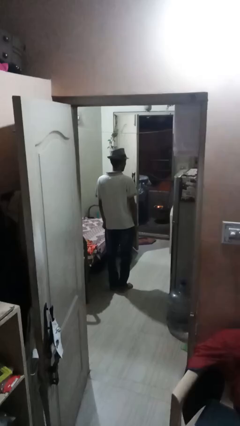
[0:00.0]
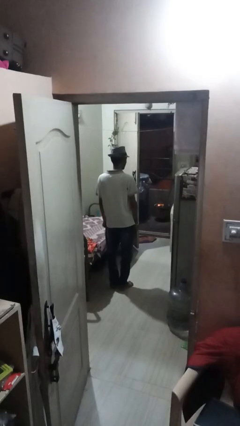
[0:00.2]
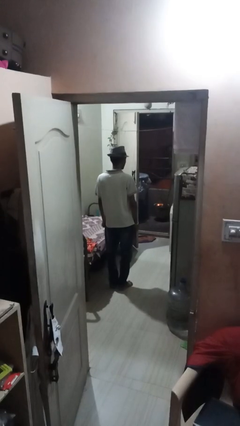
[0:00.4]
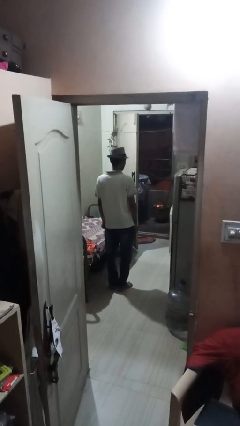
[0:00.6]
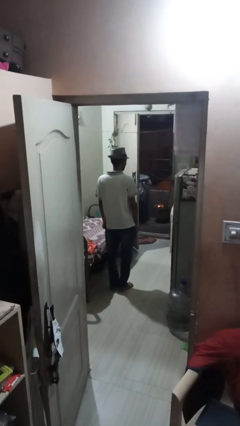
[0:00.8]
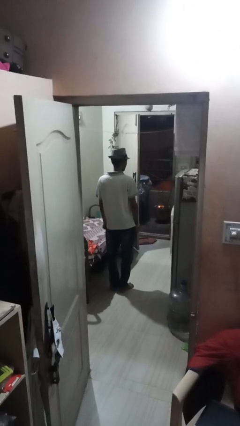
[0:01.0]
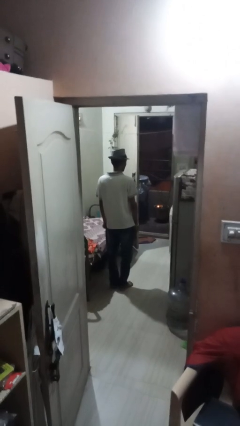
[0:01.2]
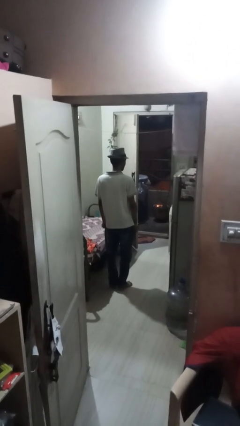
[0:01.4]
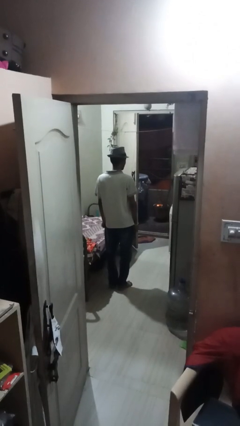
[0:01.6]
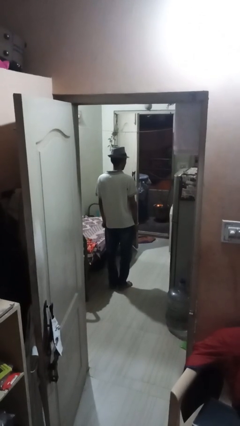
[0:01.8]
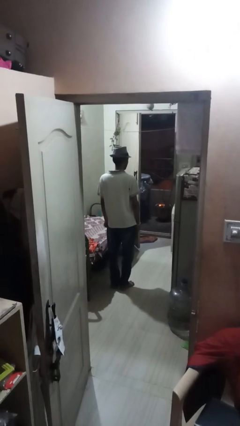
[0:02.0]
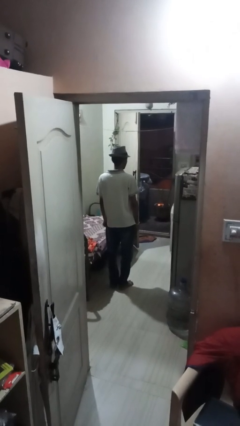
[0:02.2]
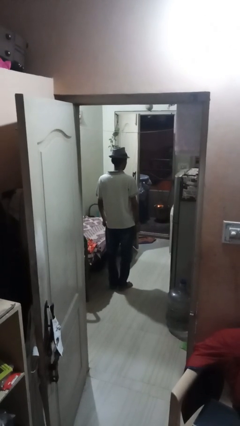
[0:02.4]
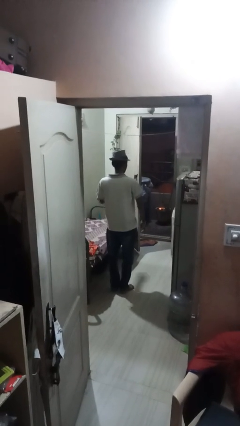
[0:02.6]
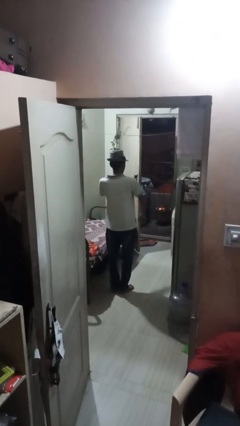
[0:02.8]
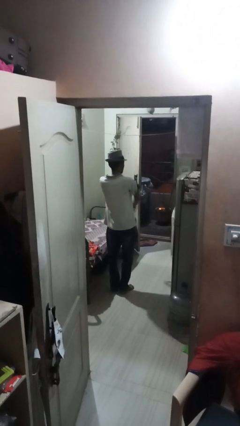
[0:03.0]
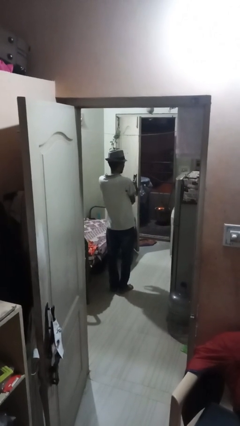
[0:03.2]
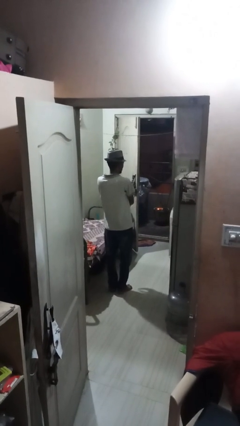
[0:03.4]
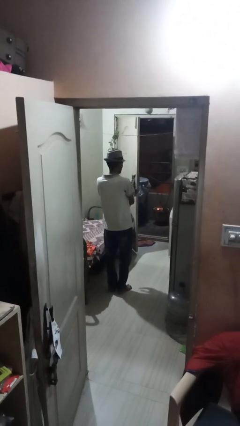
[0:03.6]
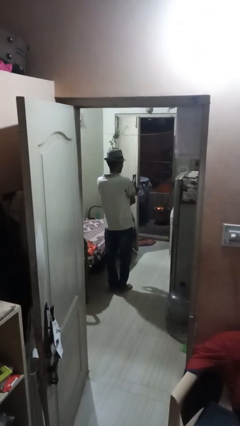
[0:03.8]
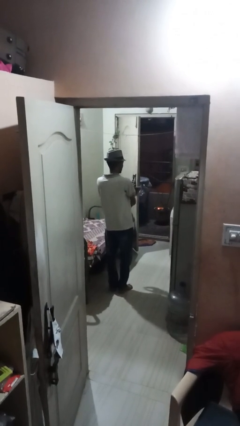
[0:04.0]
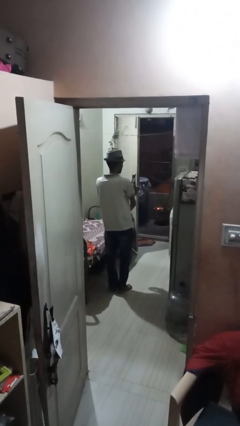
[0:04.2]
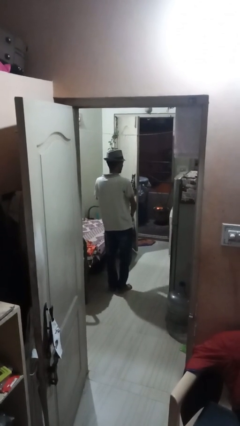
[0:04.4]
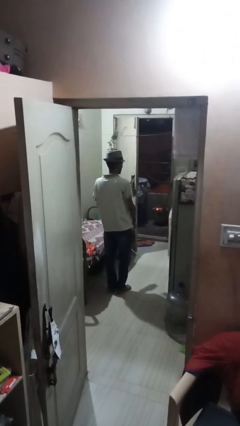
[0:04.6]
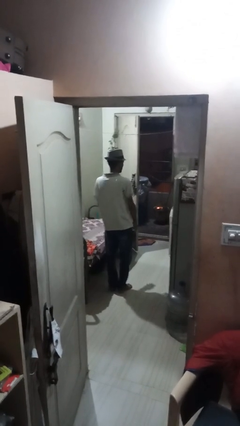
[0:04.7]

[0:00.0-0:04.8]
person swats bug

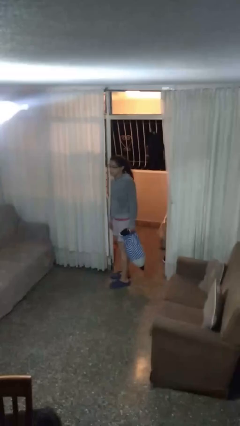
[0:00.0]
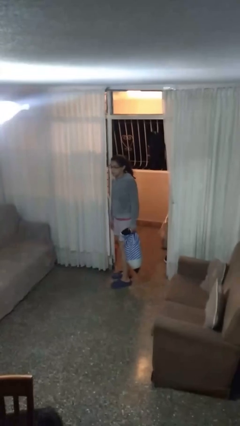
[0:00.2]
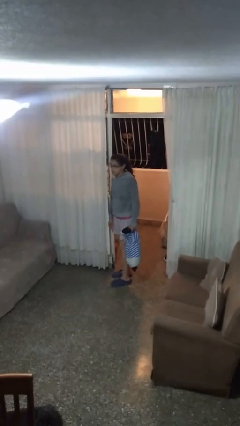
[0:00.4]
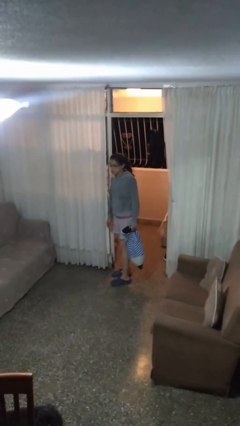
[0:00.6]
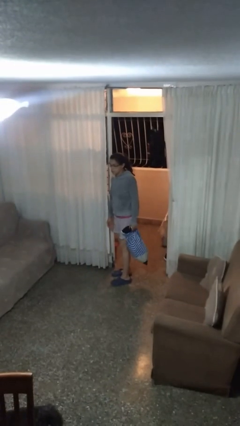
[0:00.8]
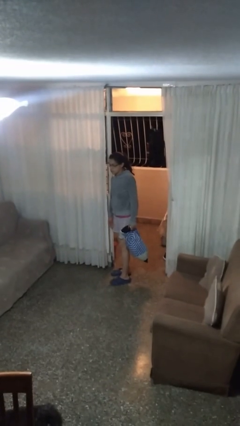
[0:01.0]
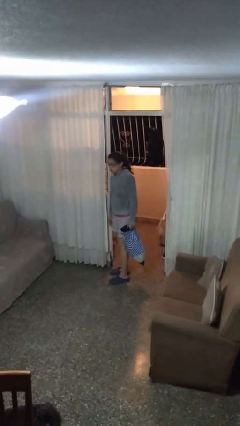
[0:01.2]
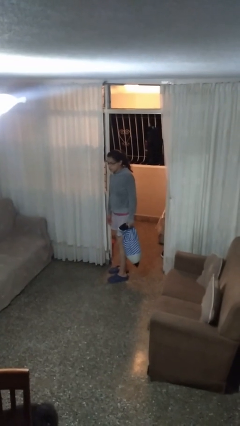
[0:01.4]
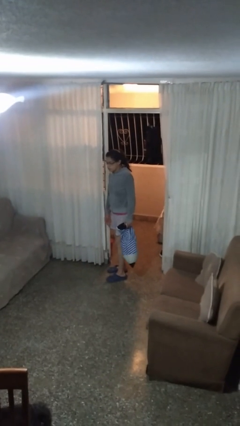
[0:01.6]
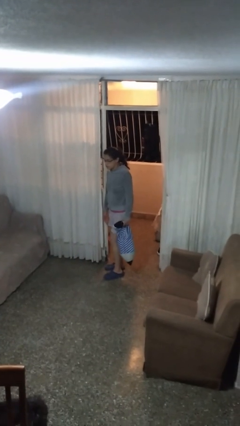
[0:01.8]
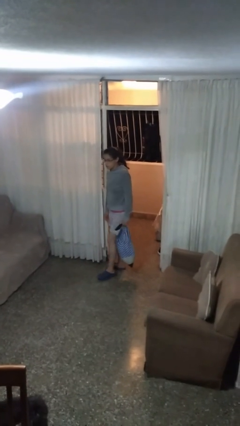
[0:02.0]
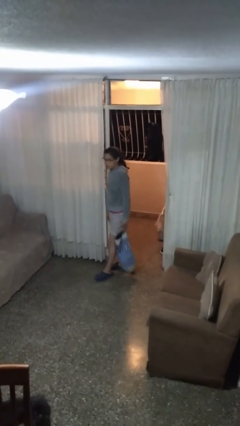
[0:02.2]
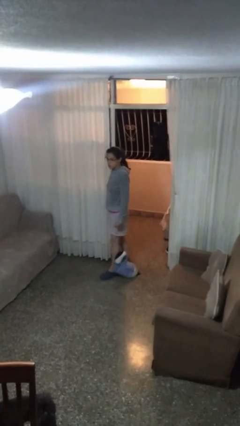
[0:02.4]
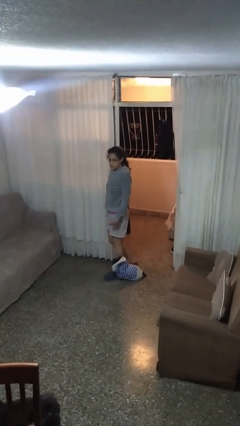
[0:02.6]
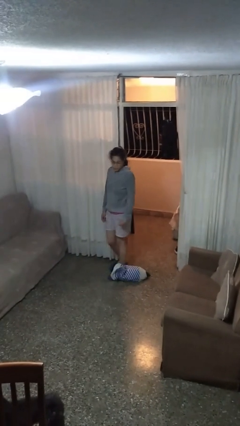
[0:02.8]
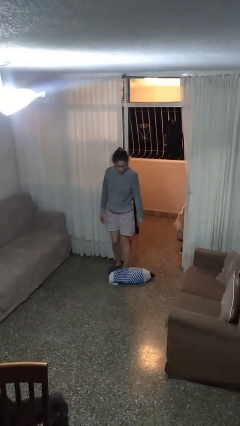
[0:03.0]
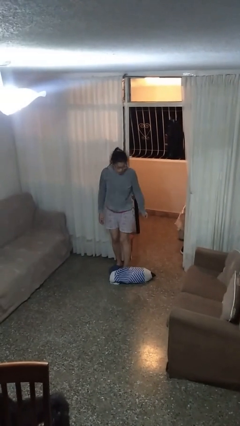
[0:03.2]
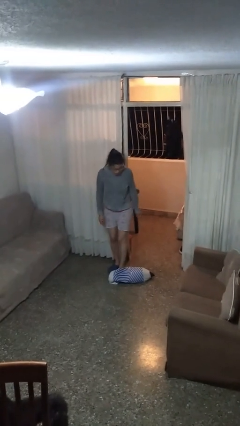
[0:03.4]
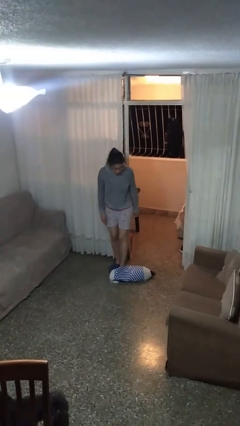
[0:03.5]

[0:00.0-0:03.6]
person drops object

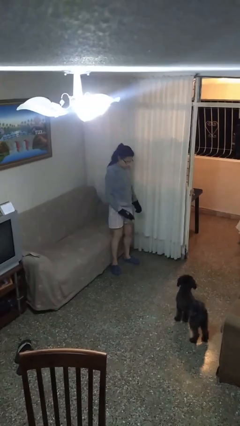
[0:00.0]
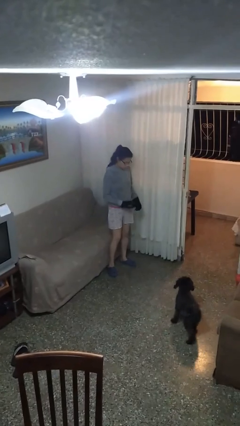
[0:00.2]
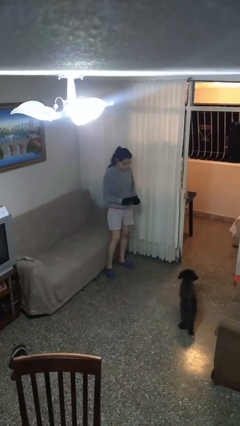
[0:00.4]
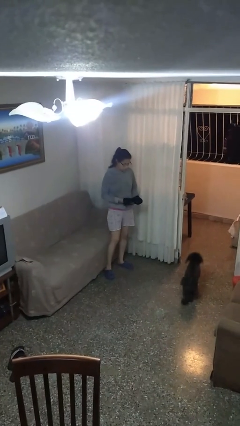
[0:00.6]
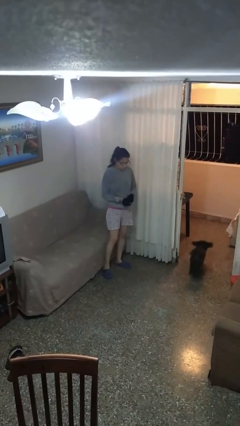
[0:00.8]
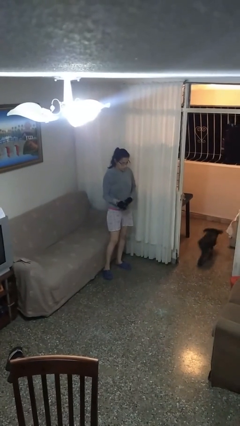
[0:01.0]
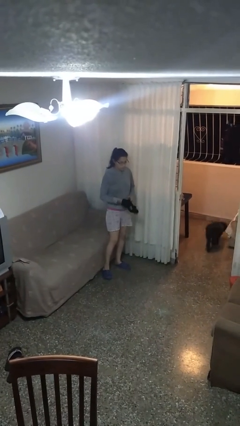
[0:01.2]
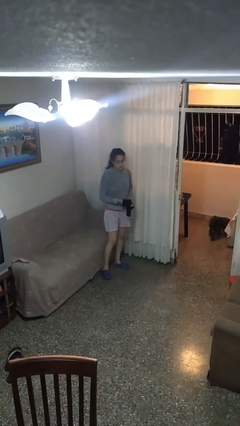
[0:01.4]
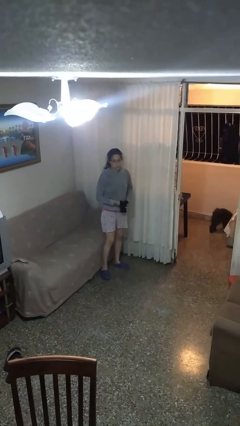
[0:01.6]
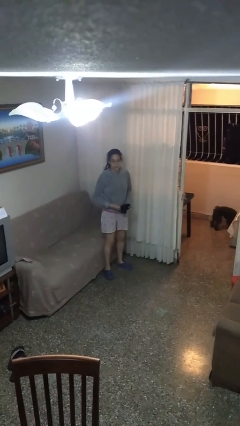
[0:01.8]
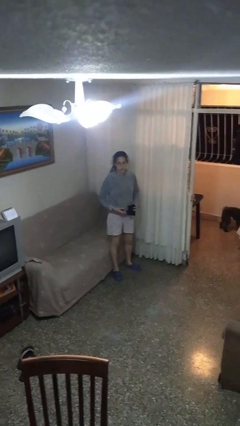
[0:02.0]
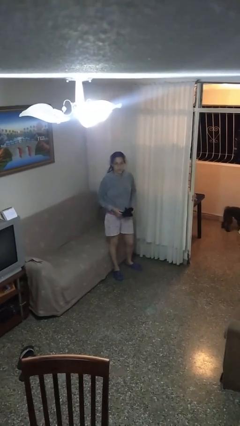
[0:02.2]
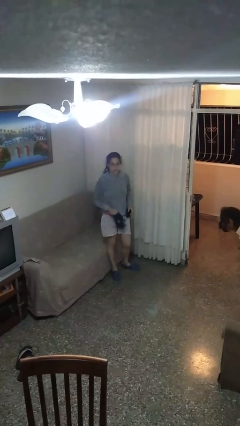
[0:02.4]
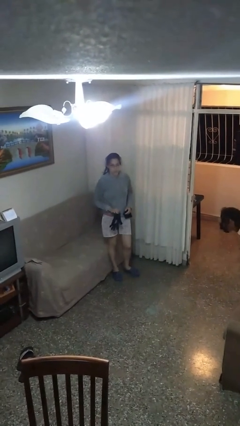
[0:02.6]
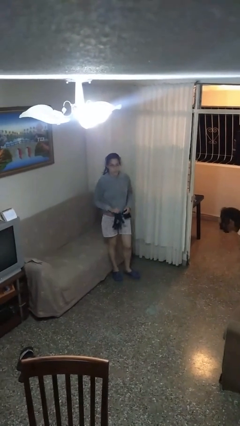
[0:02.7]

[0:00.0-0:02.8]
person takes off gloves

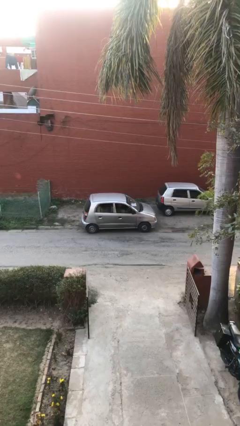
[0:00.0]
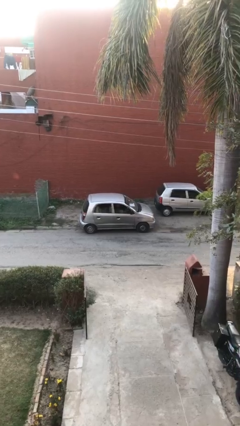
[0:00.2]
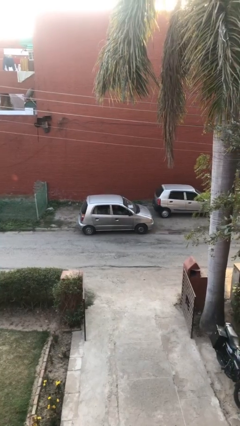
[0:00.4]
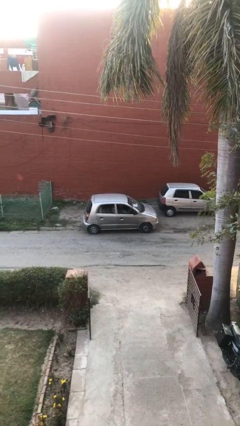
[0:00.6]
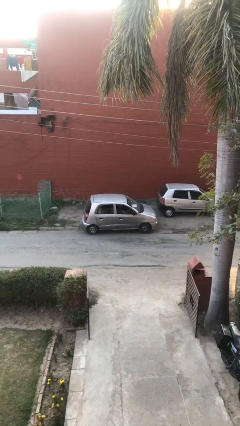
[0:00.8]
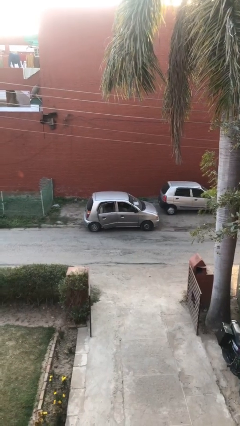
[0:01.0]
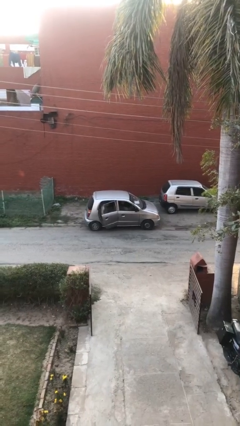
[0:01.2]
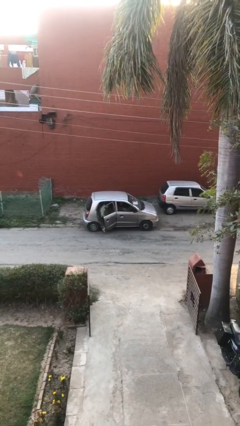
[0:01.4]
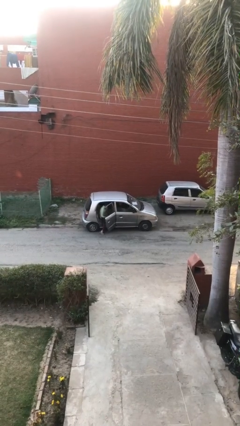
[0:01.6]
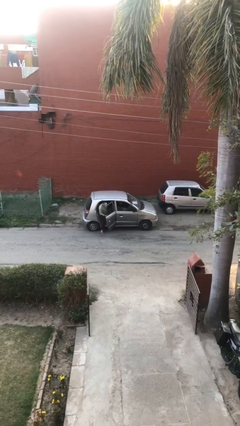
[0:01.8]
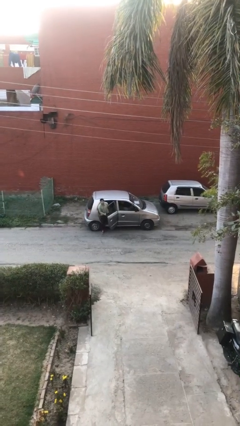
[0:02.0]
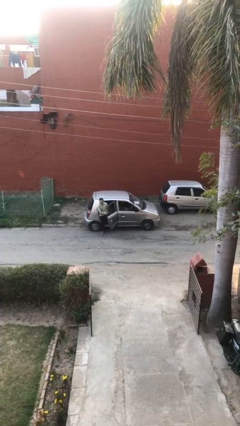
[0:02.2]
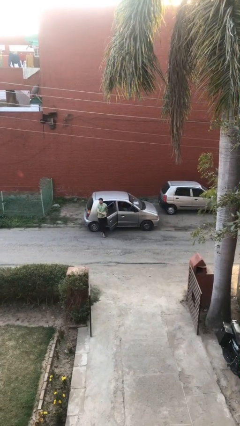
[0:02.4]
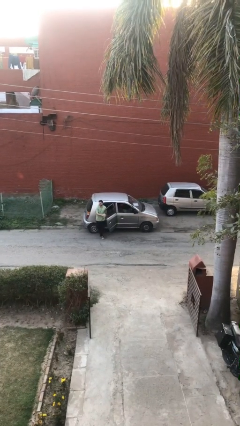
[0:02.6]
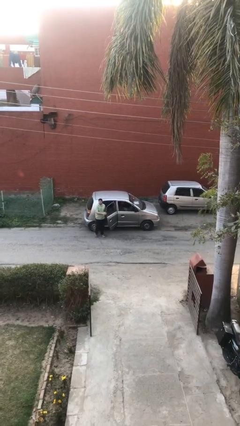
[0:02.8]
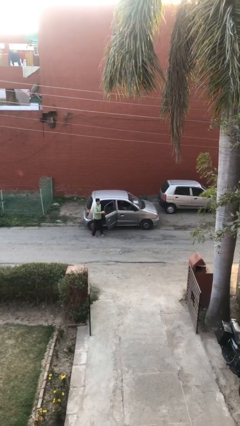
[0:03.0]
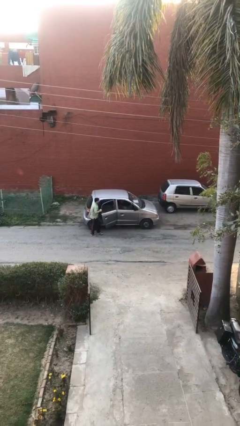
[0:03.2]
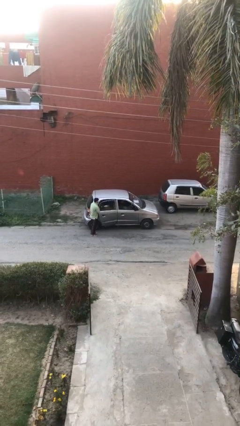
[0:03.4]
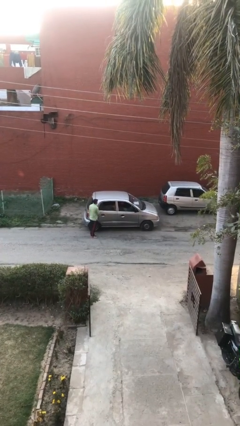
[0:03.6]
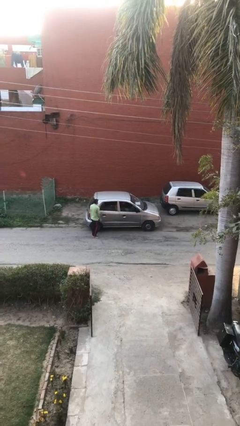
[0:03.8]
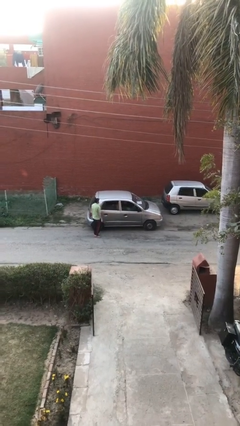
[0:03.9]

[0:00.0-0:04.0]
car drops off person

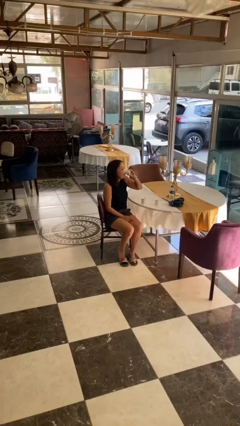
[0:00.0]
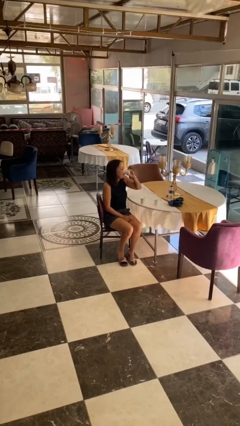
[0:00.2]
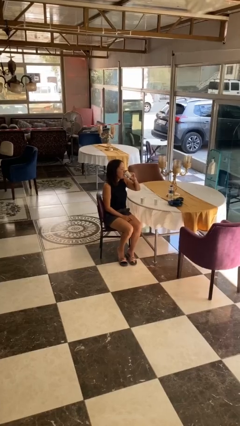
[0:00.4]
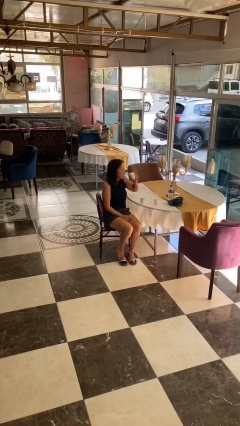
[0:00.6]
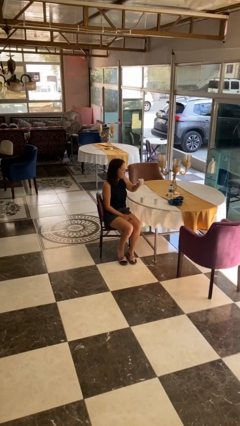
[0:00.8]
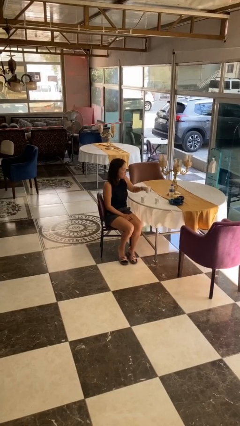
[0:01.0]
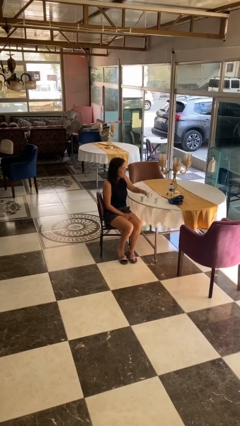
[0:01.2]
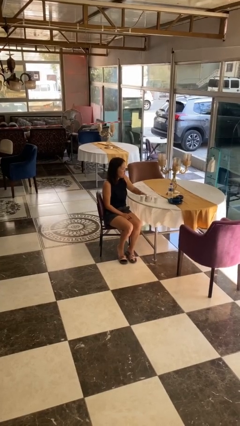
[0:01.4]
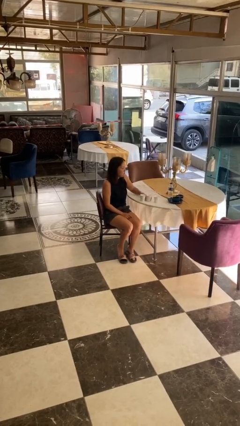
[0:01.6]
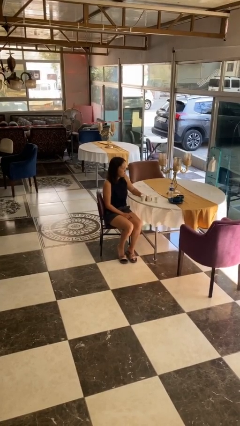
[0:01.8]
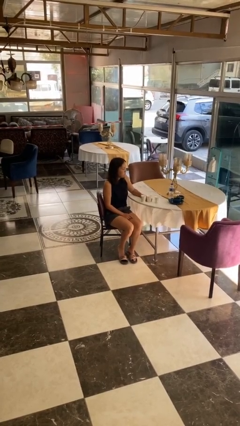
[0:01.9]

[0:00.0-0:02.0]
person puts down object on table

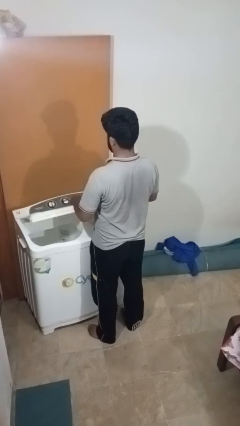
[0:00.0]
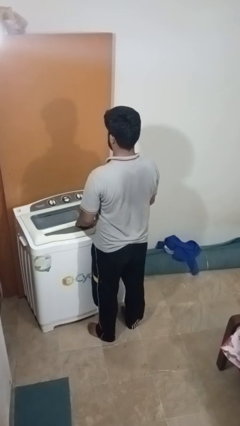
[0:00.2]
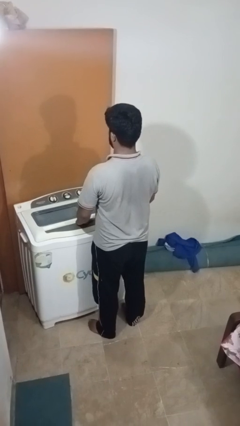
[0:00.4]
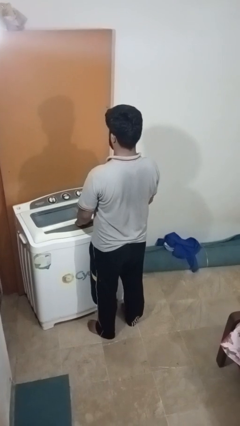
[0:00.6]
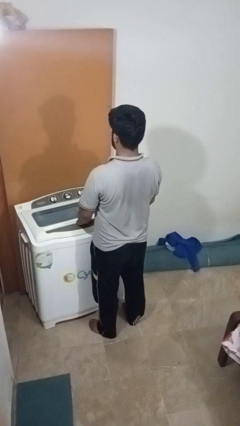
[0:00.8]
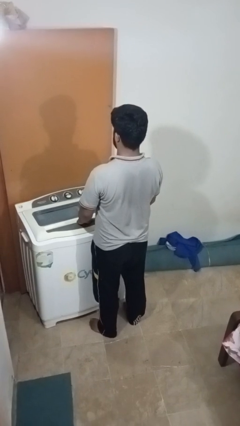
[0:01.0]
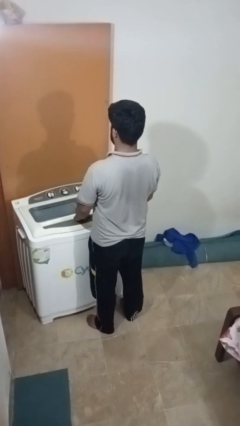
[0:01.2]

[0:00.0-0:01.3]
person closes clothes washer
